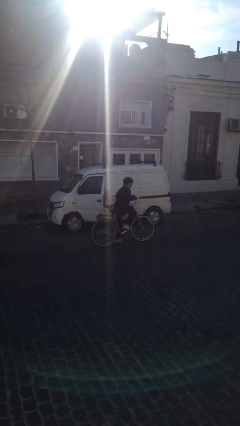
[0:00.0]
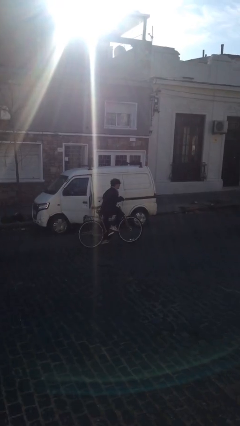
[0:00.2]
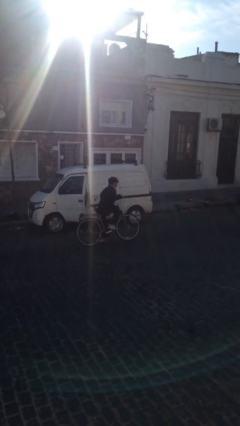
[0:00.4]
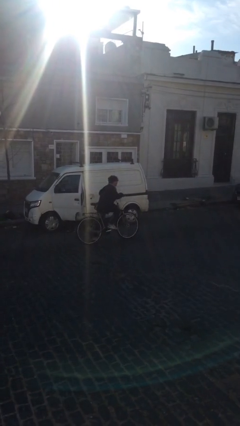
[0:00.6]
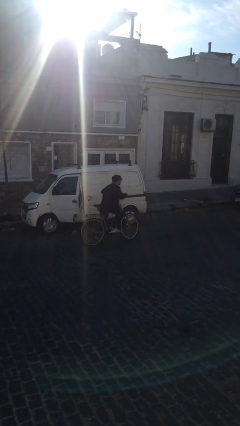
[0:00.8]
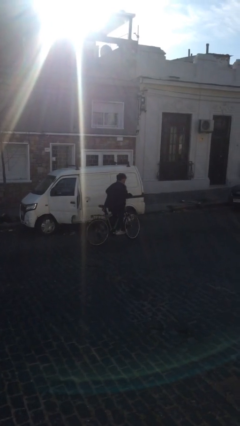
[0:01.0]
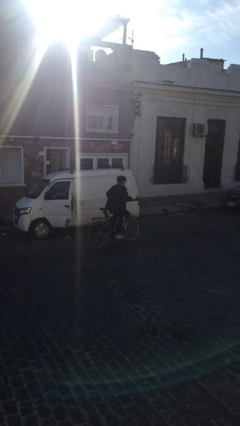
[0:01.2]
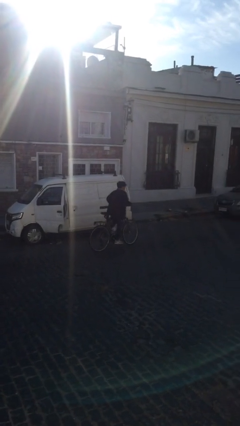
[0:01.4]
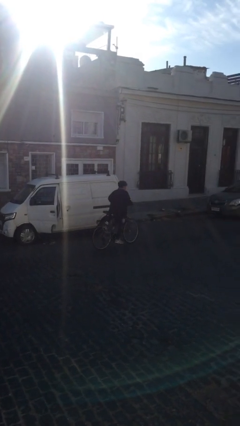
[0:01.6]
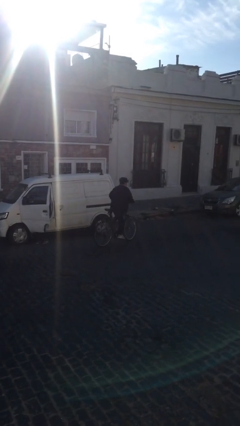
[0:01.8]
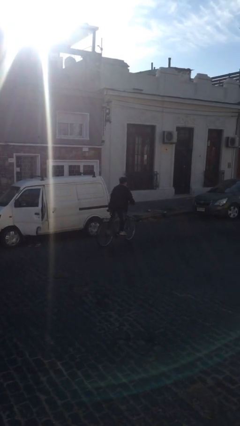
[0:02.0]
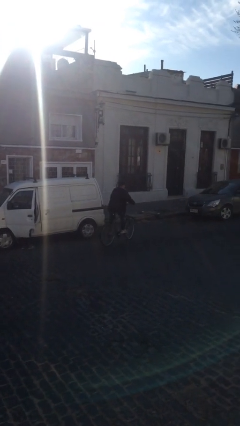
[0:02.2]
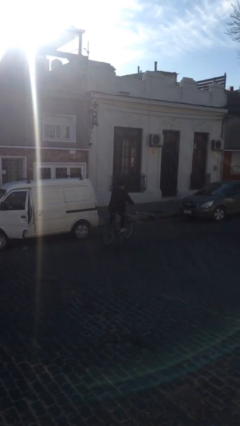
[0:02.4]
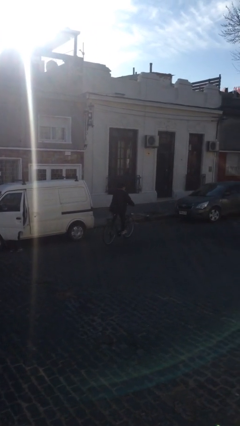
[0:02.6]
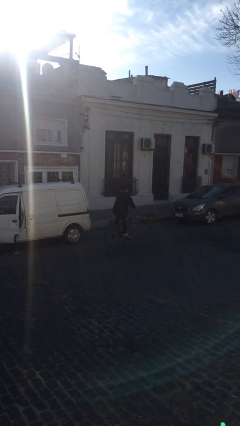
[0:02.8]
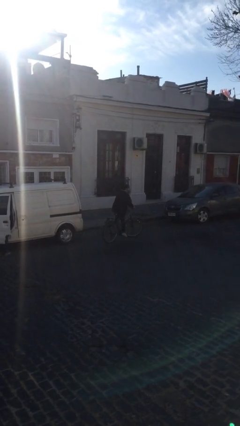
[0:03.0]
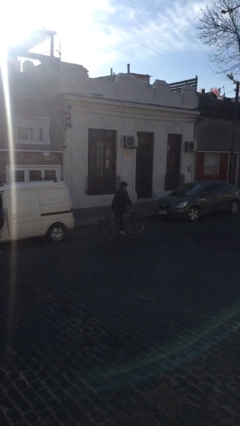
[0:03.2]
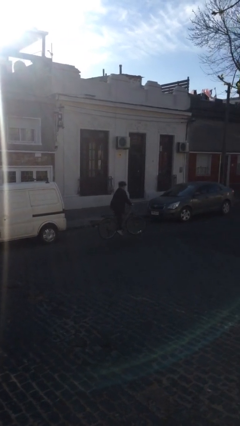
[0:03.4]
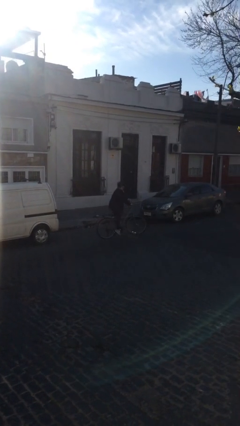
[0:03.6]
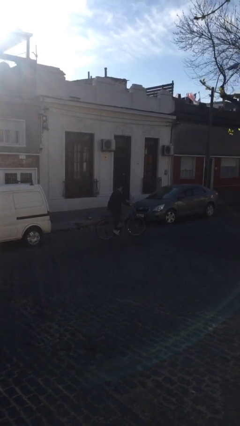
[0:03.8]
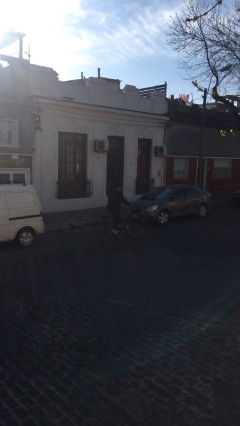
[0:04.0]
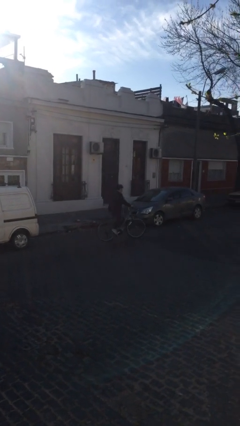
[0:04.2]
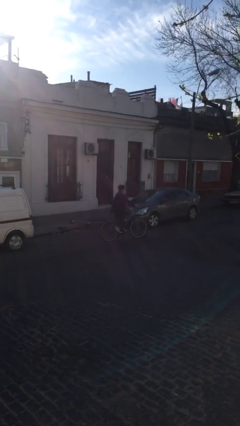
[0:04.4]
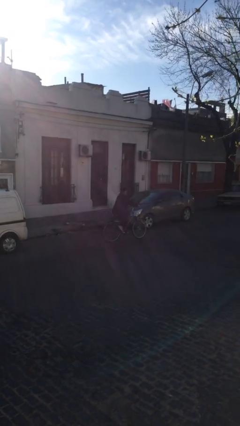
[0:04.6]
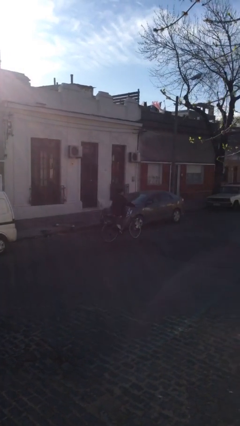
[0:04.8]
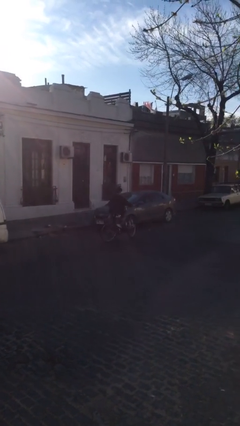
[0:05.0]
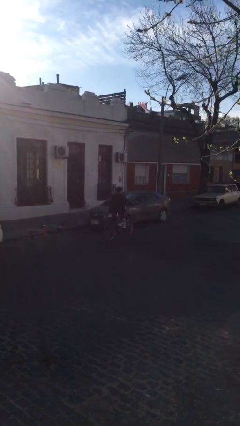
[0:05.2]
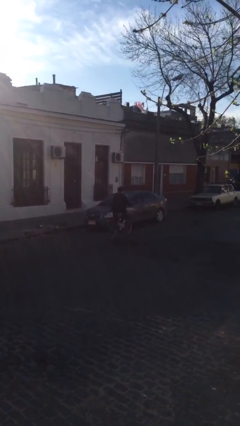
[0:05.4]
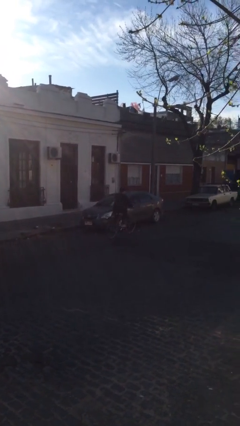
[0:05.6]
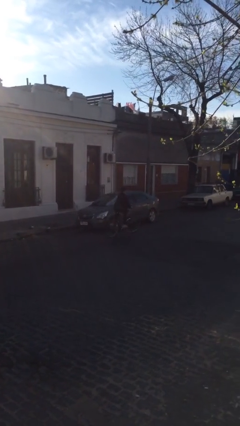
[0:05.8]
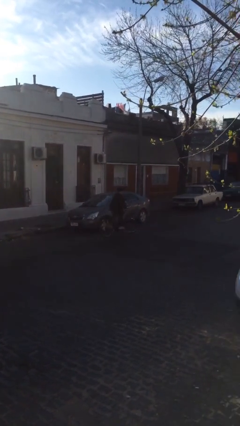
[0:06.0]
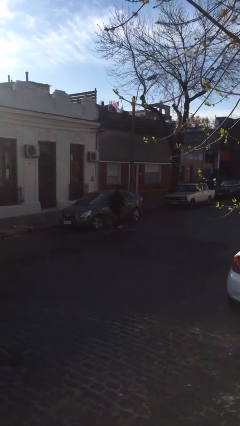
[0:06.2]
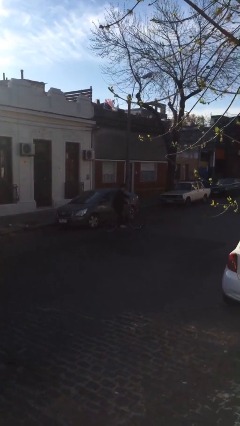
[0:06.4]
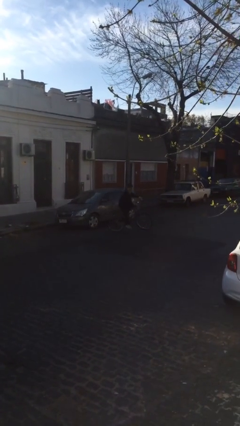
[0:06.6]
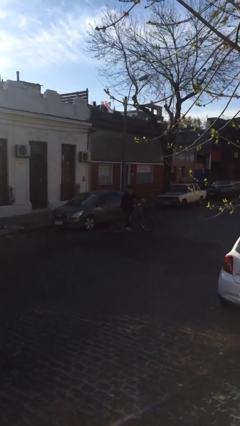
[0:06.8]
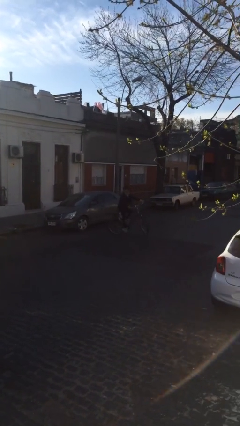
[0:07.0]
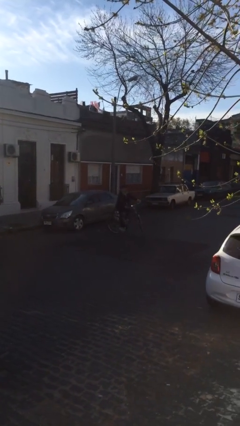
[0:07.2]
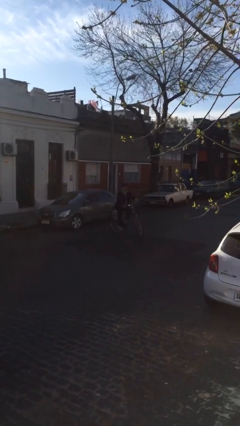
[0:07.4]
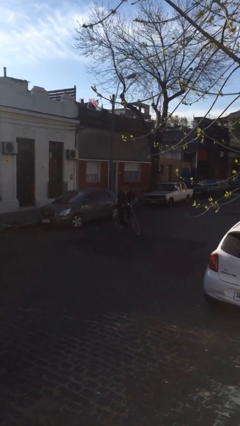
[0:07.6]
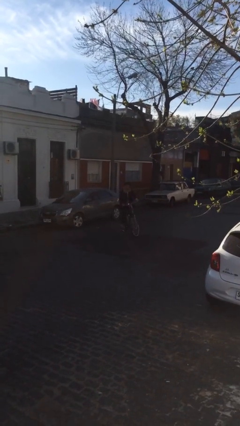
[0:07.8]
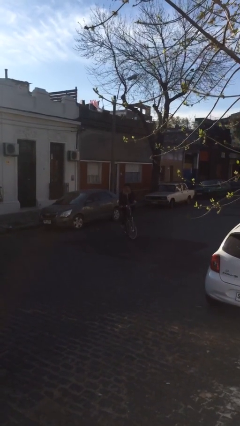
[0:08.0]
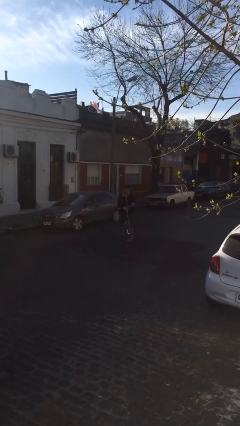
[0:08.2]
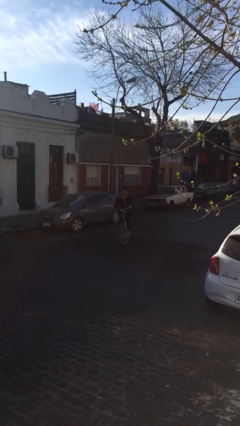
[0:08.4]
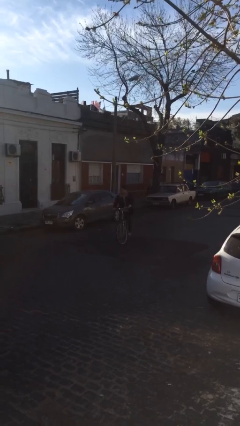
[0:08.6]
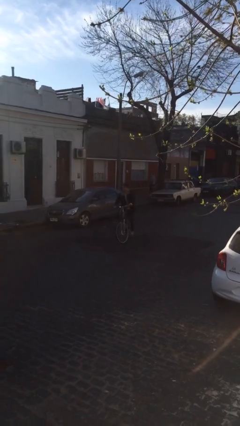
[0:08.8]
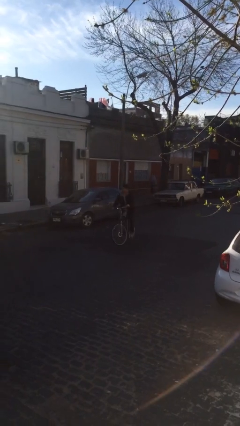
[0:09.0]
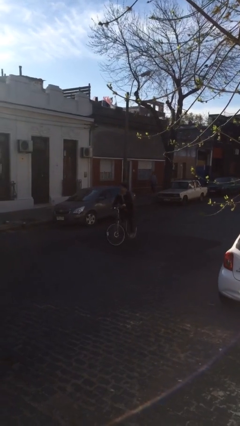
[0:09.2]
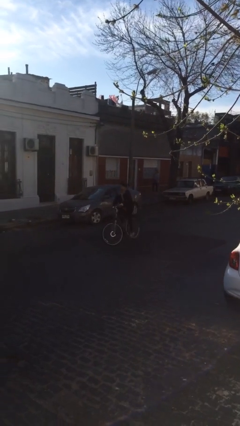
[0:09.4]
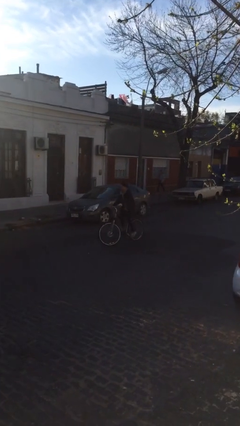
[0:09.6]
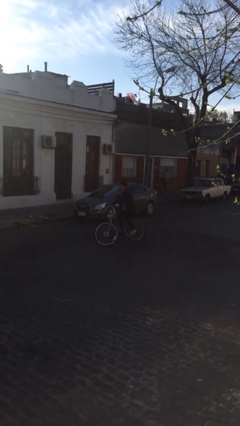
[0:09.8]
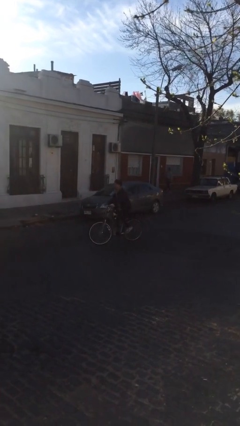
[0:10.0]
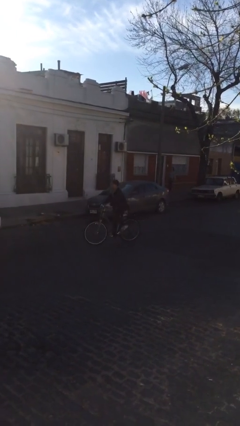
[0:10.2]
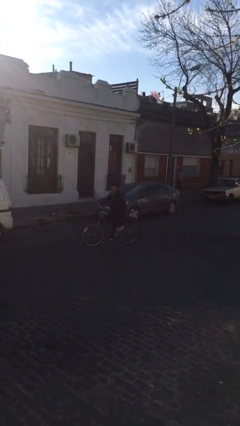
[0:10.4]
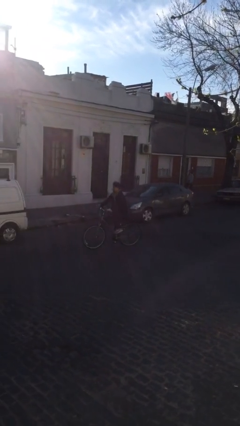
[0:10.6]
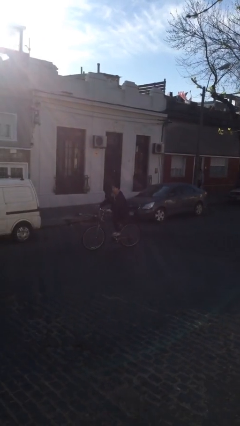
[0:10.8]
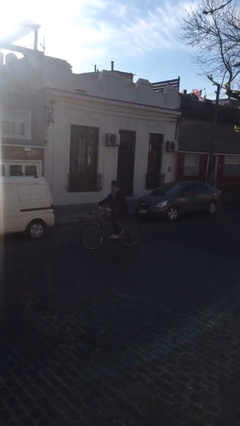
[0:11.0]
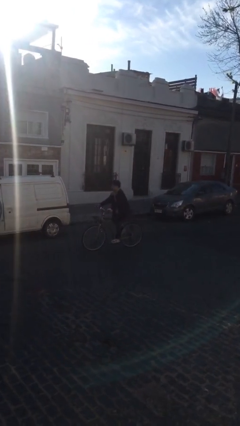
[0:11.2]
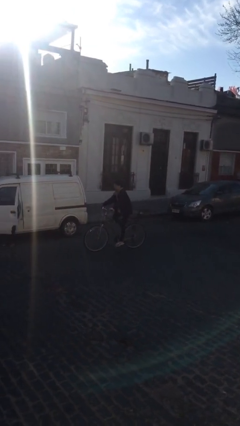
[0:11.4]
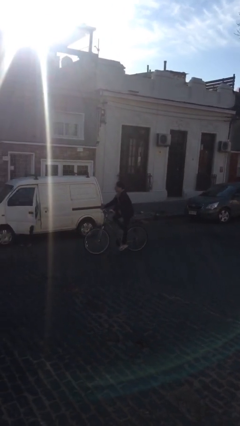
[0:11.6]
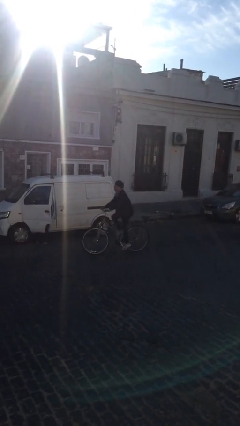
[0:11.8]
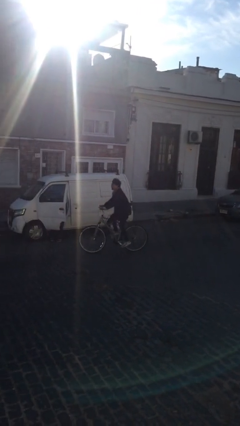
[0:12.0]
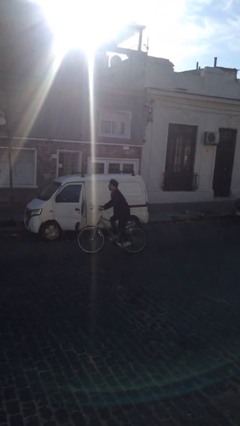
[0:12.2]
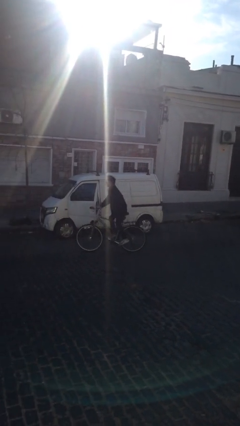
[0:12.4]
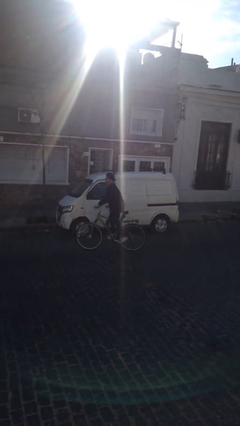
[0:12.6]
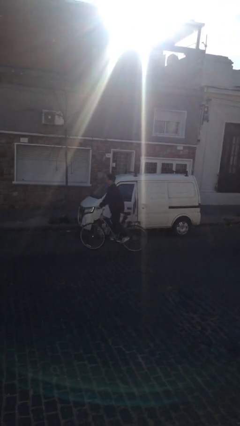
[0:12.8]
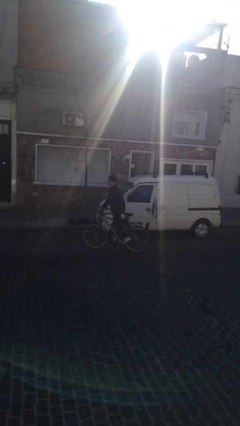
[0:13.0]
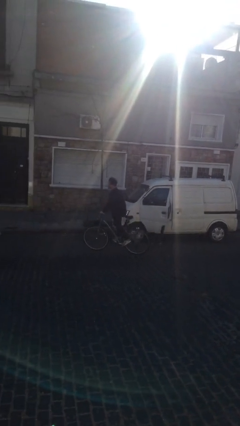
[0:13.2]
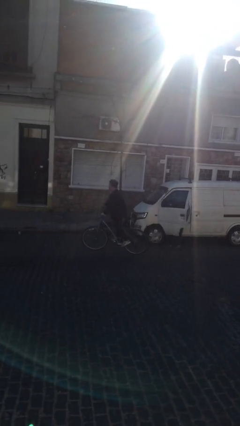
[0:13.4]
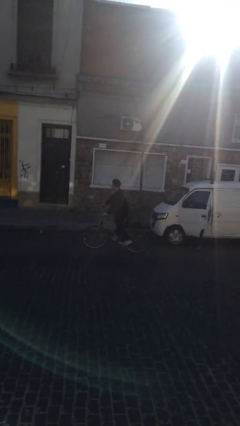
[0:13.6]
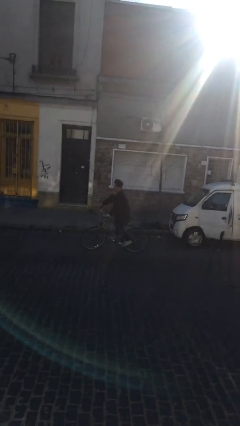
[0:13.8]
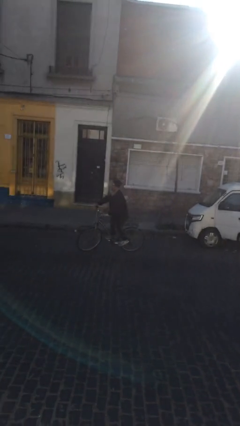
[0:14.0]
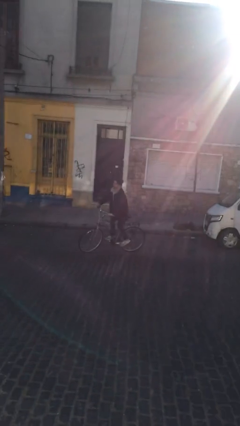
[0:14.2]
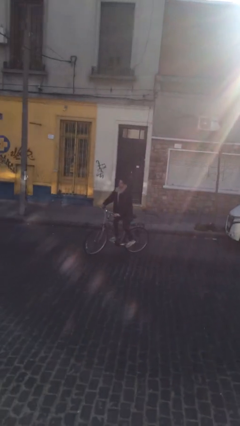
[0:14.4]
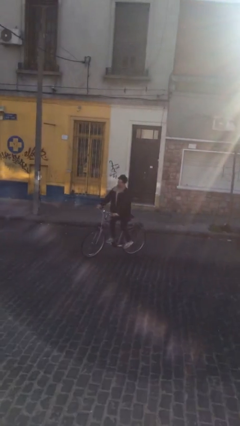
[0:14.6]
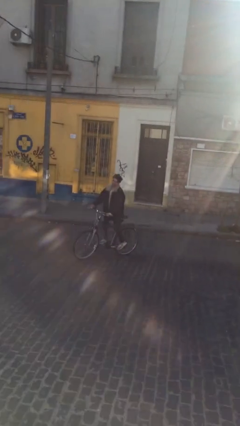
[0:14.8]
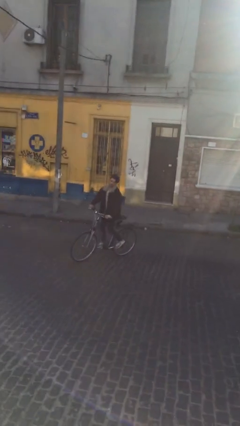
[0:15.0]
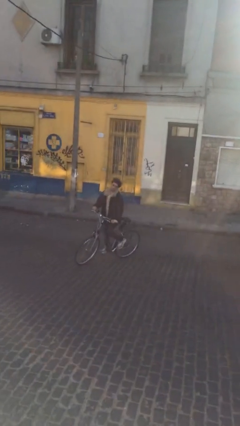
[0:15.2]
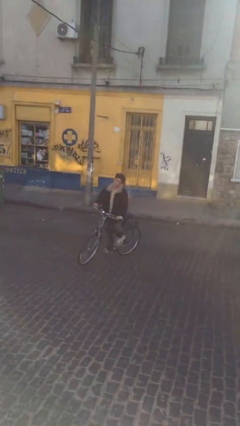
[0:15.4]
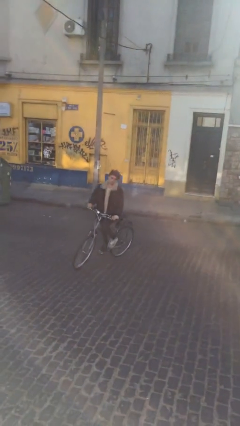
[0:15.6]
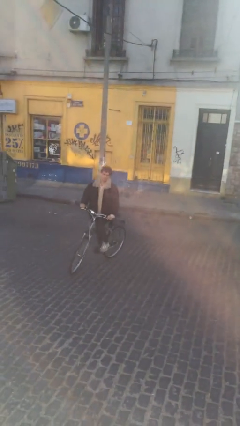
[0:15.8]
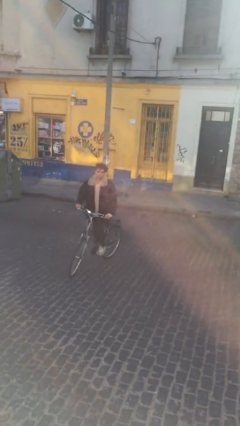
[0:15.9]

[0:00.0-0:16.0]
person rides bicycle

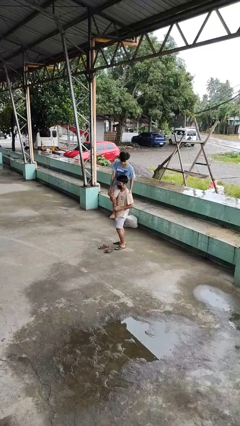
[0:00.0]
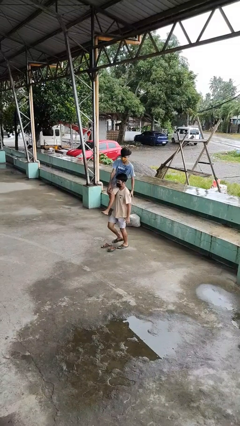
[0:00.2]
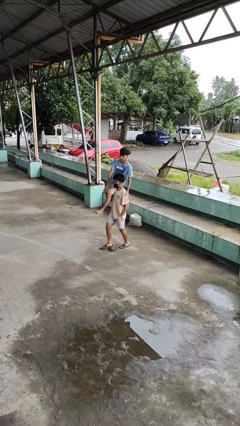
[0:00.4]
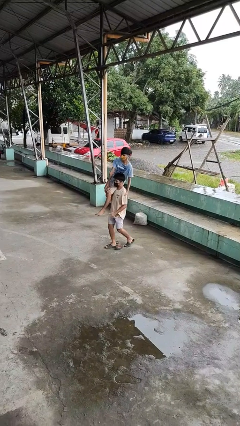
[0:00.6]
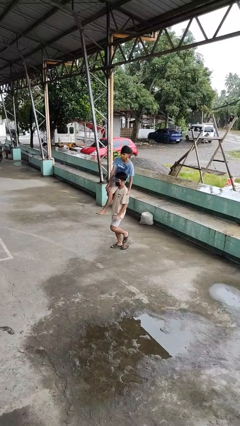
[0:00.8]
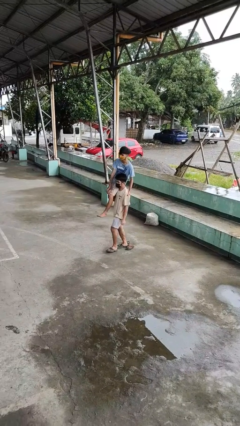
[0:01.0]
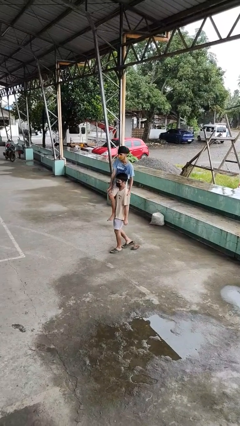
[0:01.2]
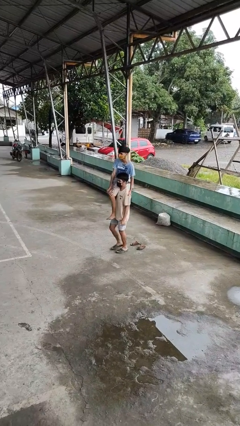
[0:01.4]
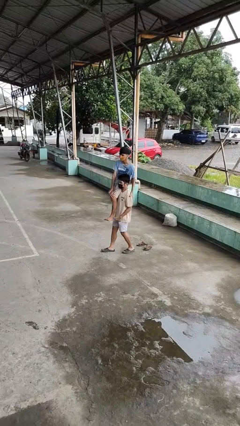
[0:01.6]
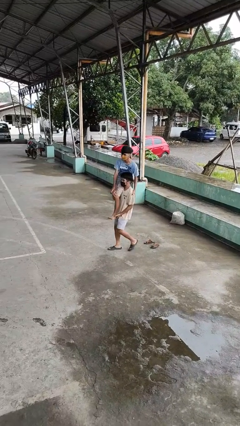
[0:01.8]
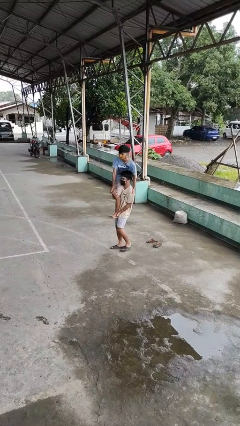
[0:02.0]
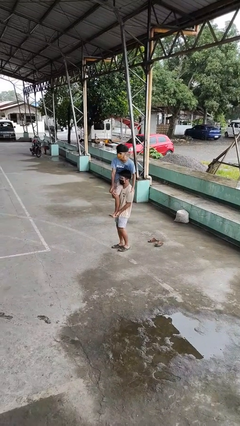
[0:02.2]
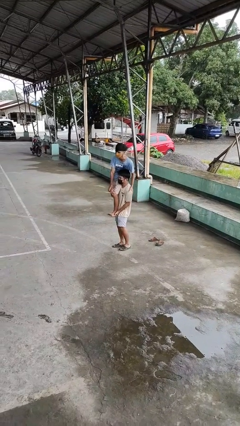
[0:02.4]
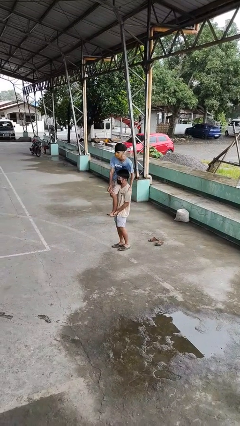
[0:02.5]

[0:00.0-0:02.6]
person carries person on shoulders
